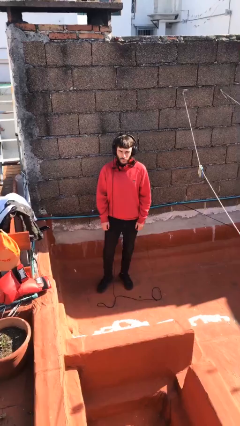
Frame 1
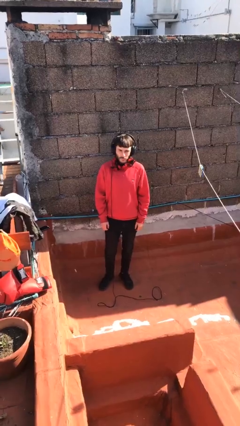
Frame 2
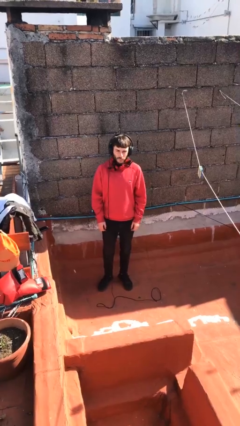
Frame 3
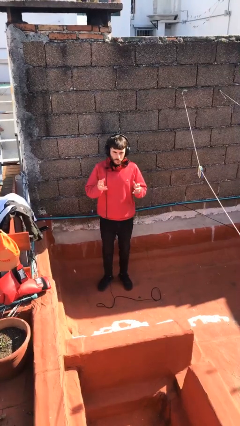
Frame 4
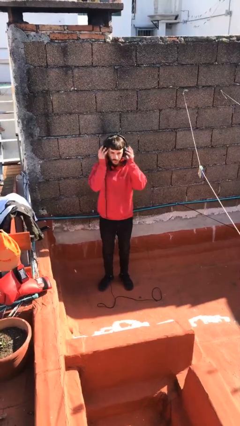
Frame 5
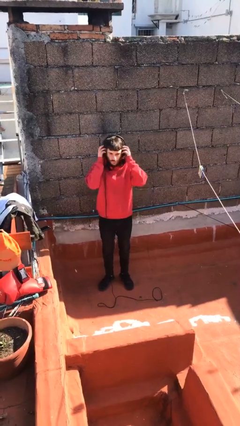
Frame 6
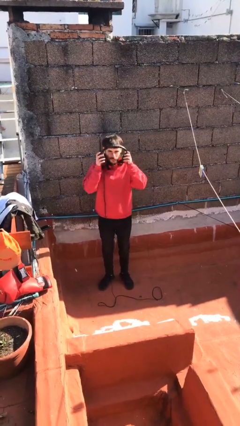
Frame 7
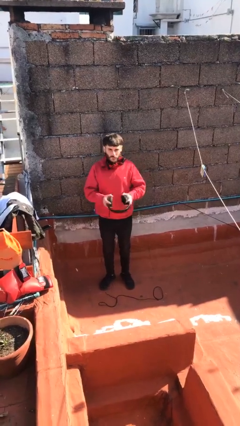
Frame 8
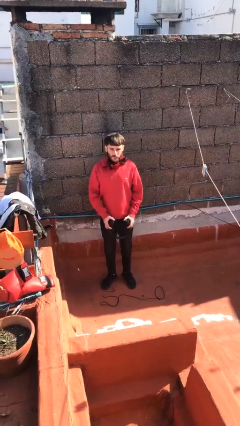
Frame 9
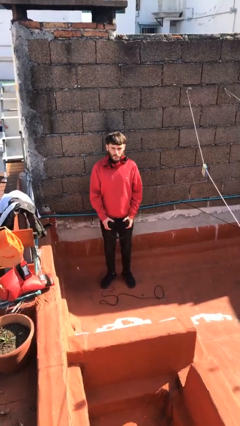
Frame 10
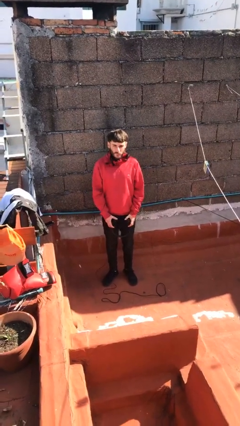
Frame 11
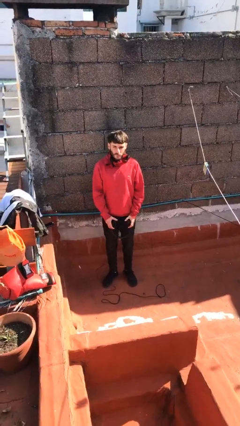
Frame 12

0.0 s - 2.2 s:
person takes off headphones

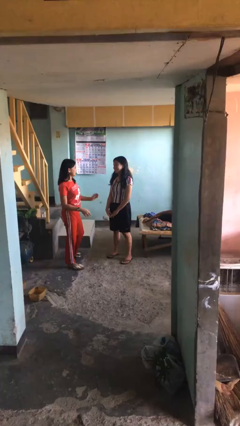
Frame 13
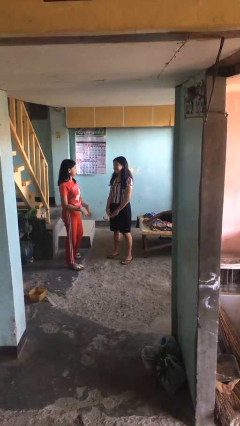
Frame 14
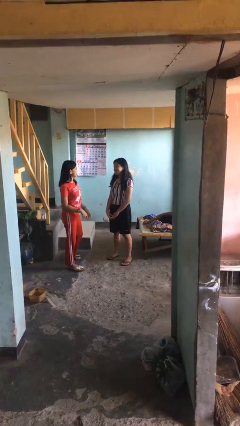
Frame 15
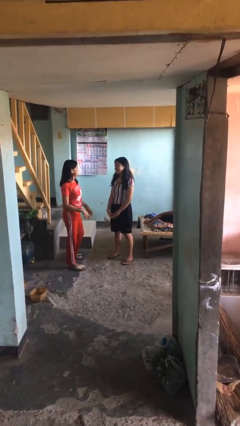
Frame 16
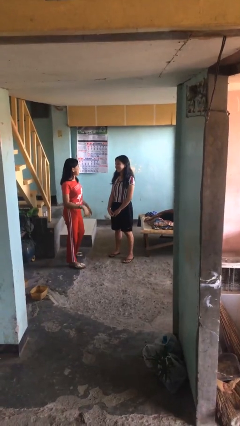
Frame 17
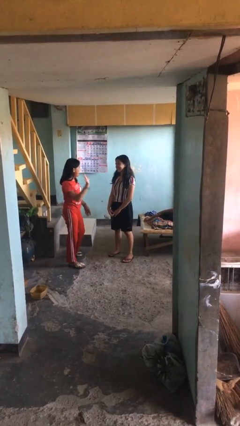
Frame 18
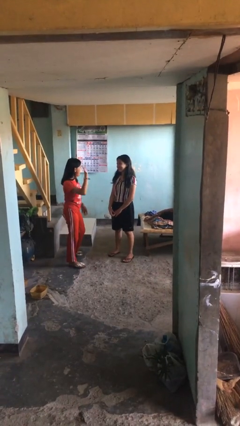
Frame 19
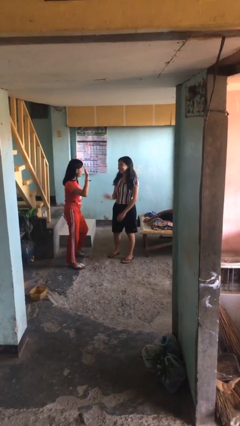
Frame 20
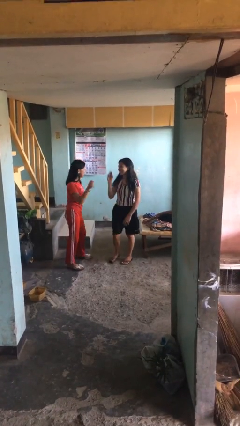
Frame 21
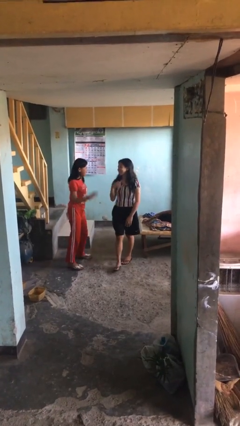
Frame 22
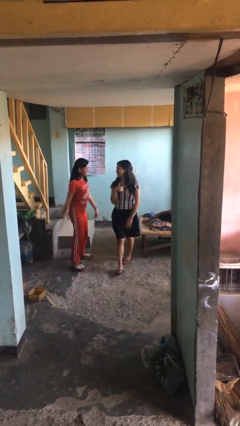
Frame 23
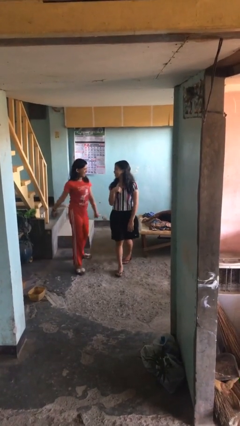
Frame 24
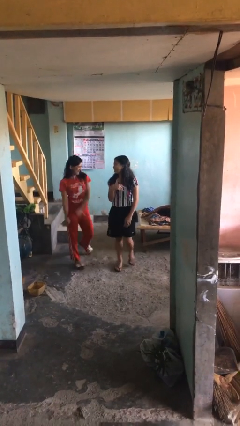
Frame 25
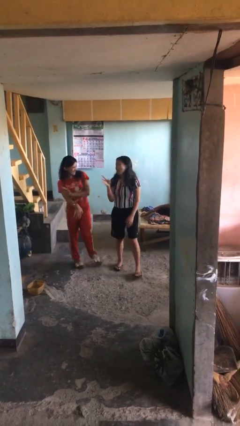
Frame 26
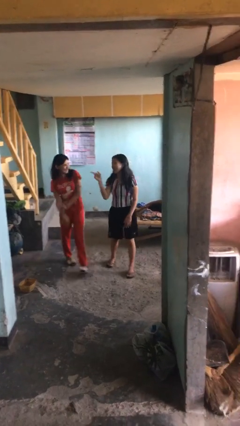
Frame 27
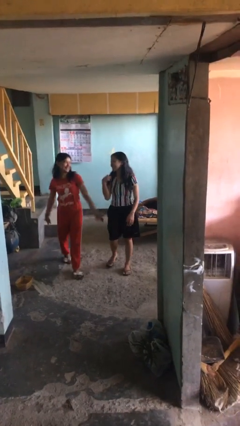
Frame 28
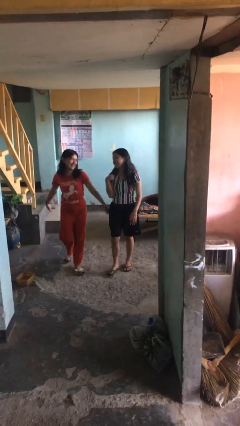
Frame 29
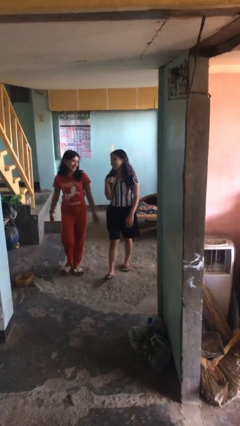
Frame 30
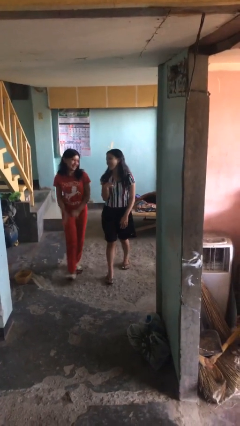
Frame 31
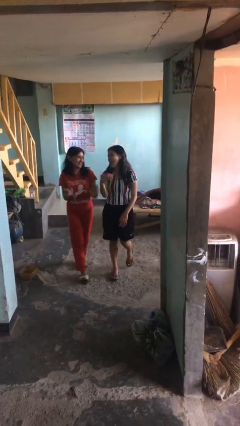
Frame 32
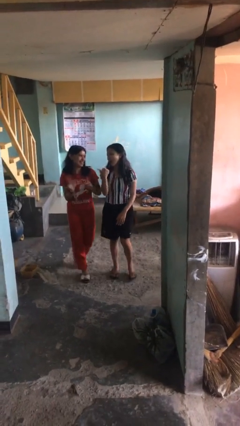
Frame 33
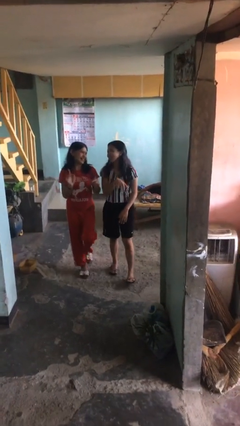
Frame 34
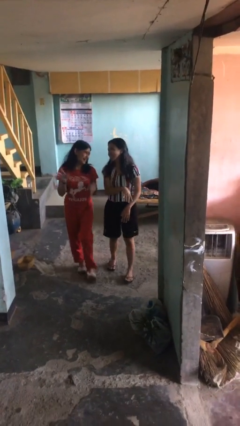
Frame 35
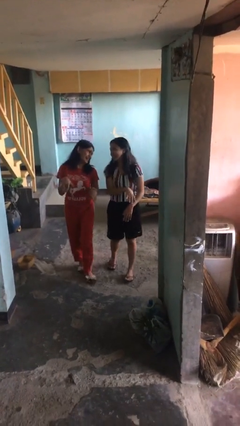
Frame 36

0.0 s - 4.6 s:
person talks to person

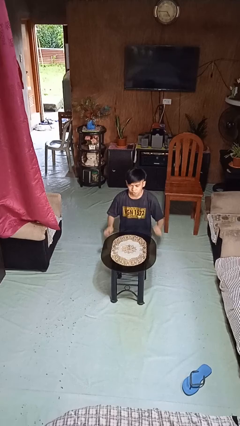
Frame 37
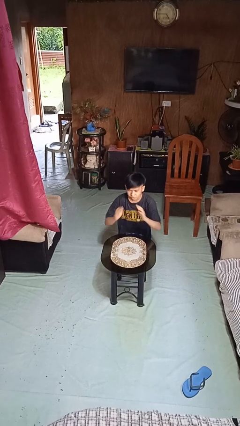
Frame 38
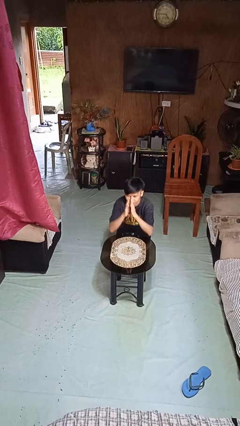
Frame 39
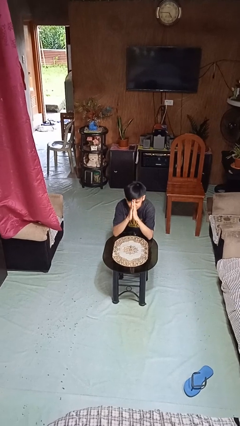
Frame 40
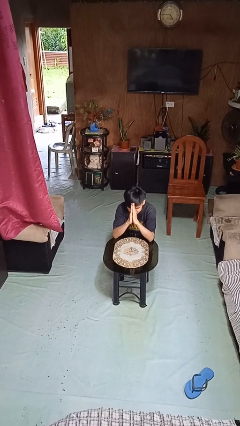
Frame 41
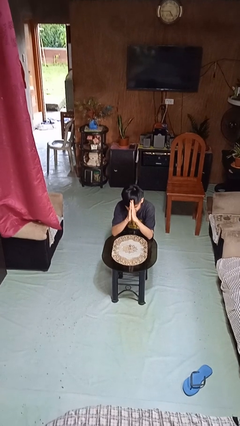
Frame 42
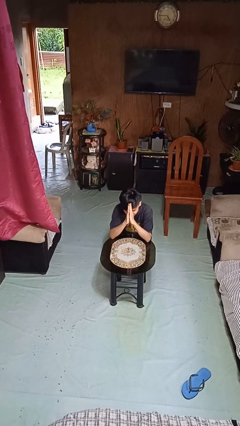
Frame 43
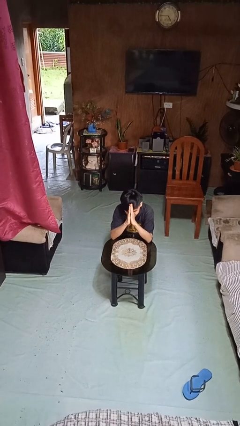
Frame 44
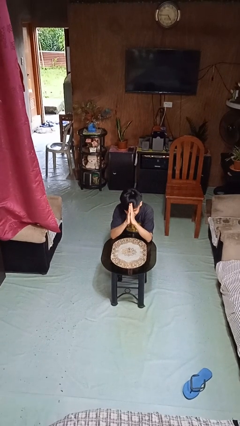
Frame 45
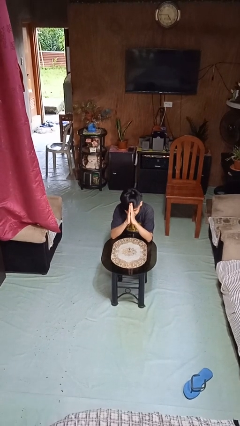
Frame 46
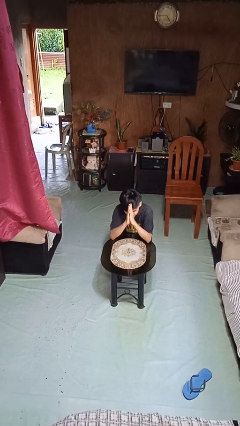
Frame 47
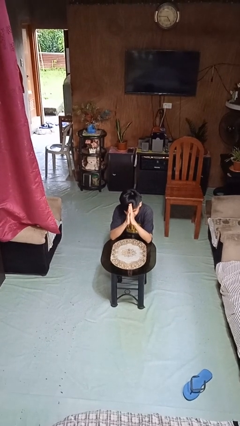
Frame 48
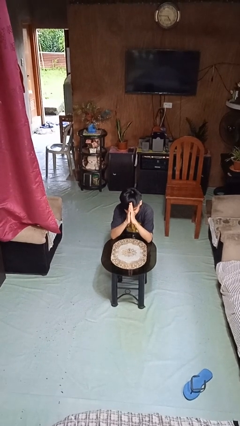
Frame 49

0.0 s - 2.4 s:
person prays

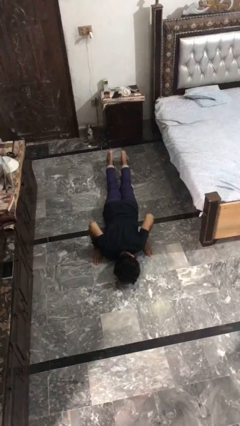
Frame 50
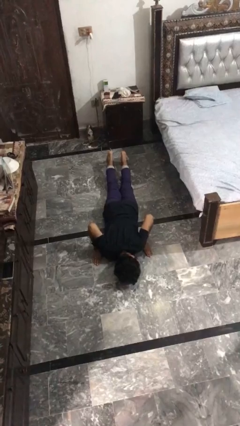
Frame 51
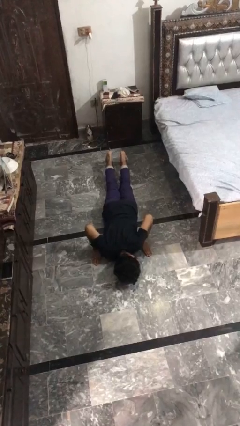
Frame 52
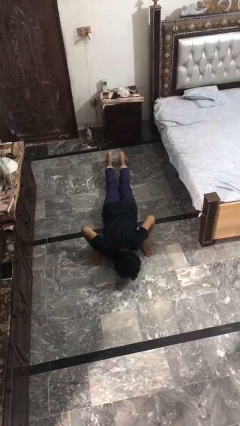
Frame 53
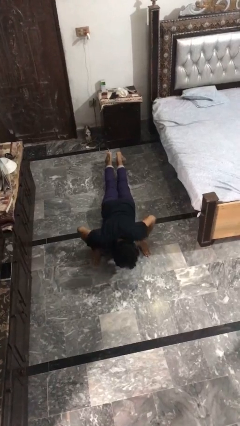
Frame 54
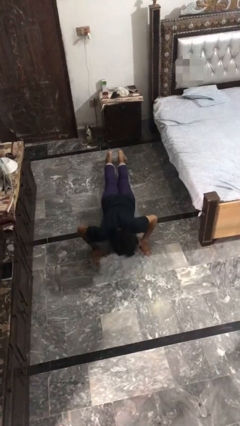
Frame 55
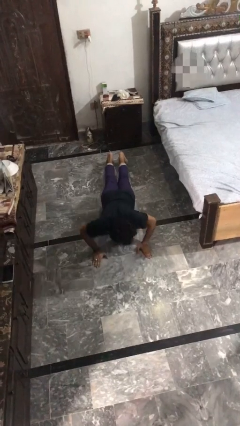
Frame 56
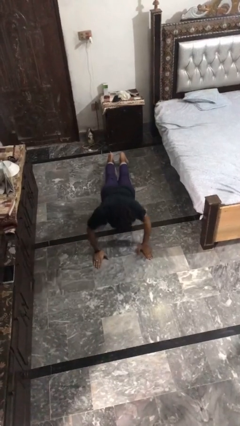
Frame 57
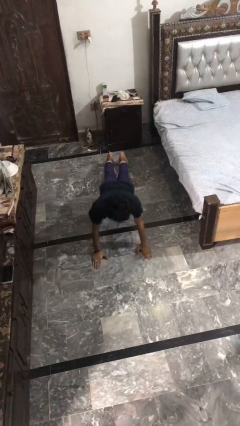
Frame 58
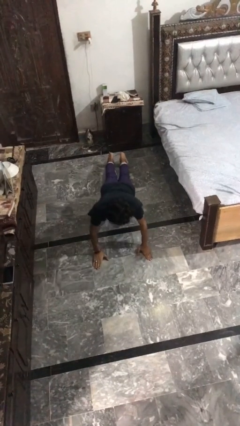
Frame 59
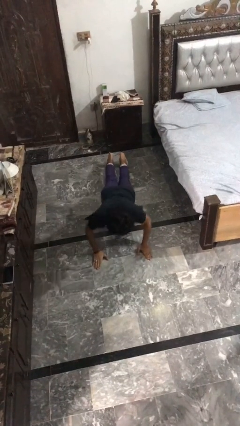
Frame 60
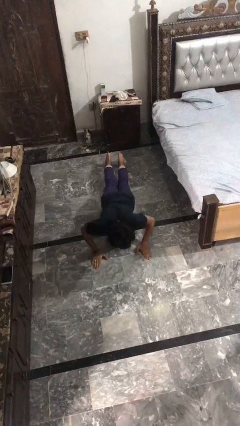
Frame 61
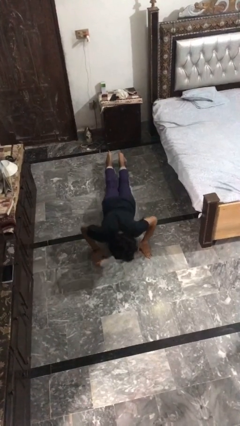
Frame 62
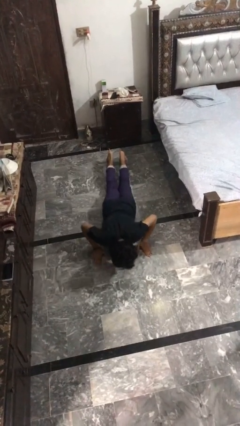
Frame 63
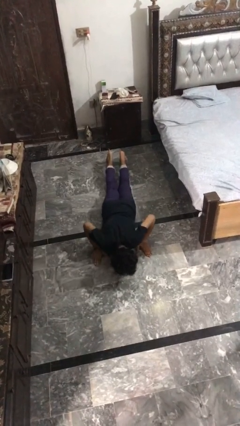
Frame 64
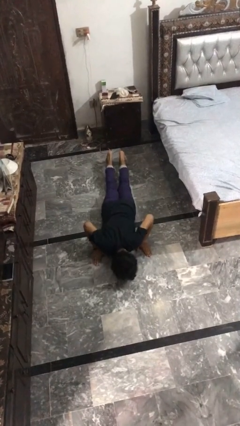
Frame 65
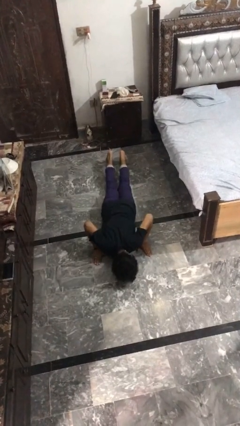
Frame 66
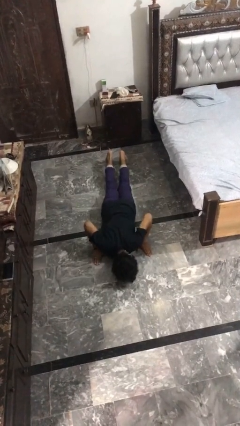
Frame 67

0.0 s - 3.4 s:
person exercises with pushup

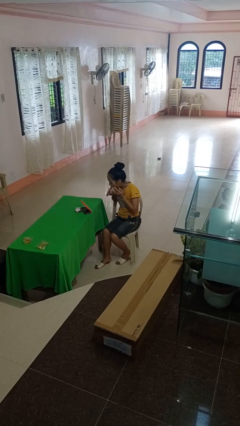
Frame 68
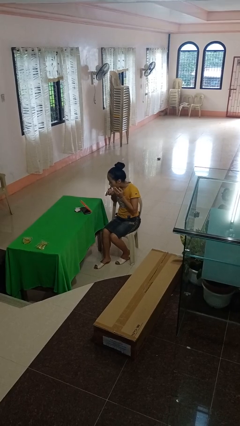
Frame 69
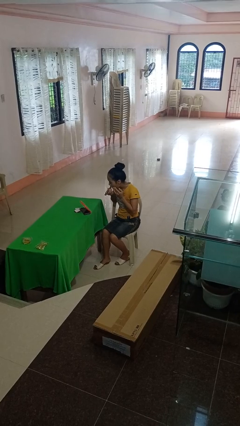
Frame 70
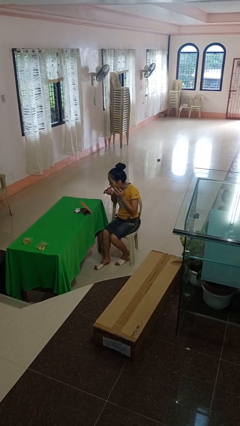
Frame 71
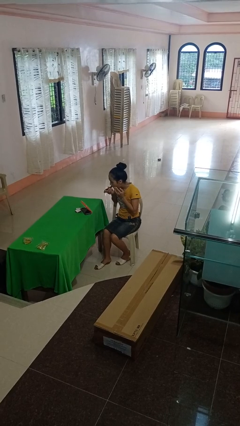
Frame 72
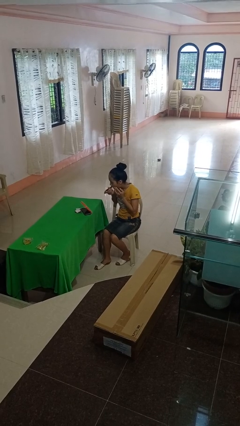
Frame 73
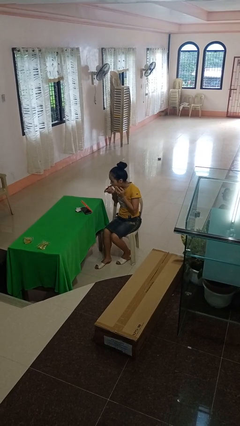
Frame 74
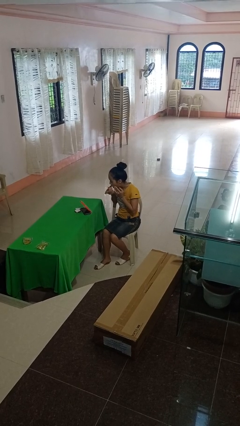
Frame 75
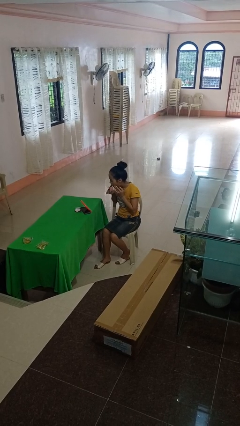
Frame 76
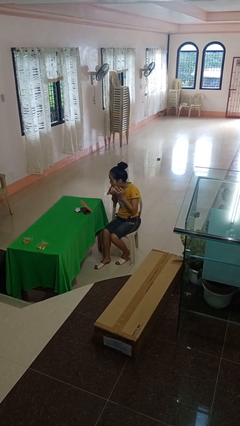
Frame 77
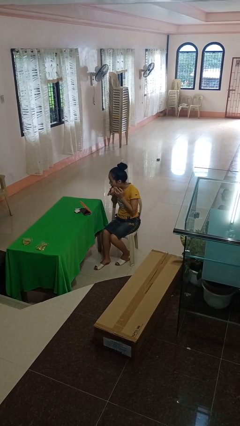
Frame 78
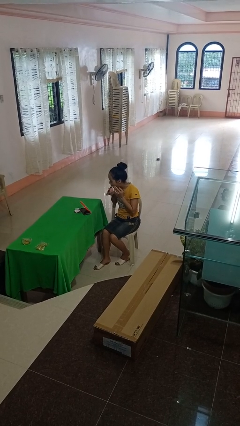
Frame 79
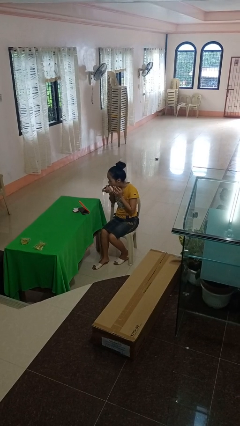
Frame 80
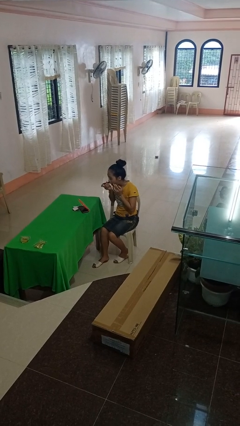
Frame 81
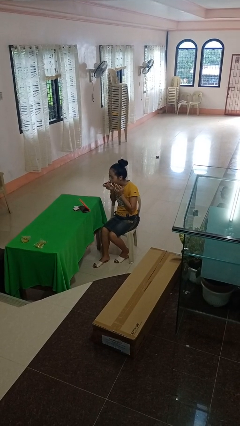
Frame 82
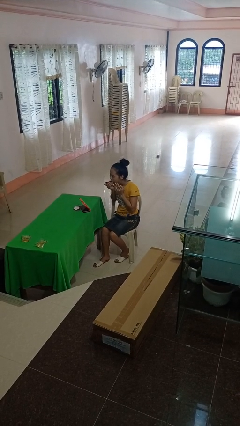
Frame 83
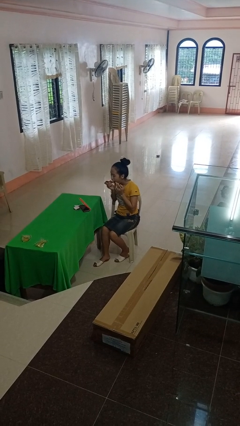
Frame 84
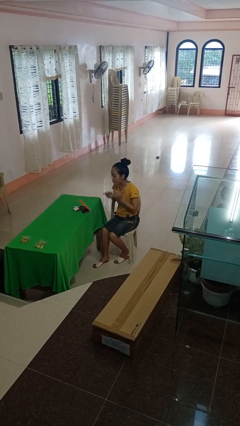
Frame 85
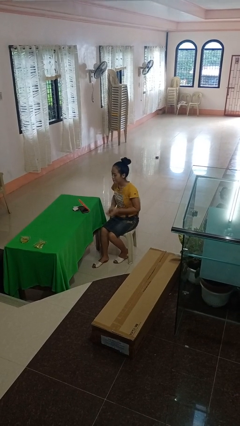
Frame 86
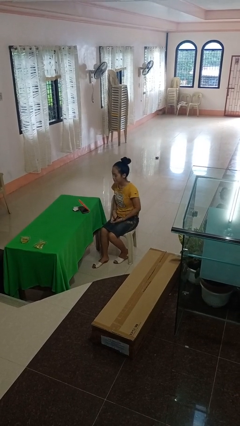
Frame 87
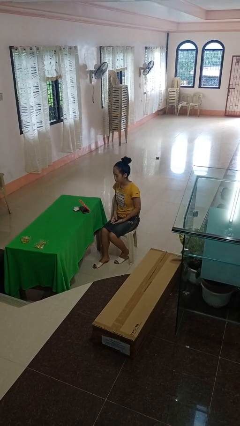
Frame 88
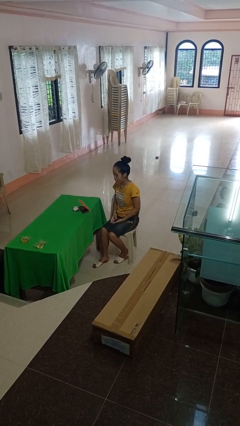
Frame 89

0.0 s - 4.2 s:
person applies lip makeup

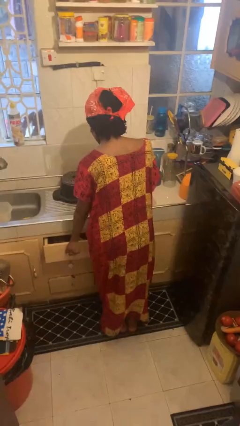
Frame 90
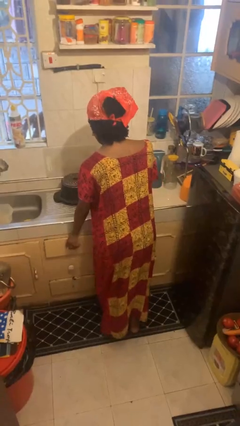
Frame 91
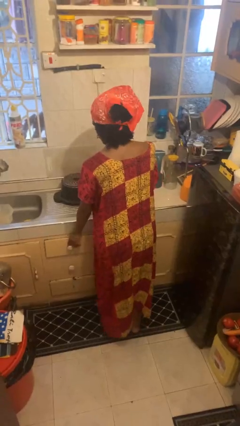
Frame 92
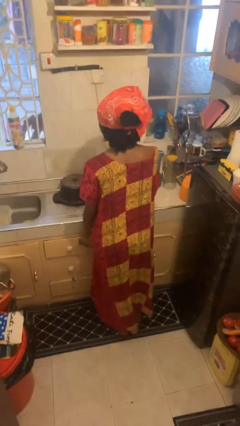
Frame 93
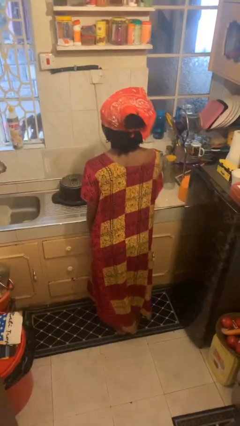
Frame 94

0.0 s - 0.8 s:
person closes kitchen drawer
